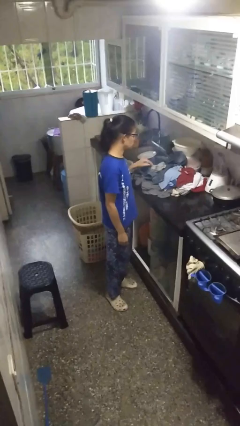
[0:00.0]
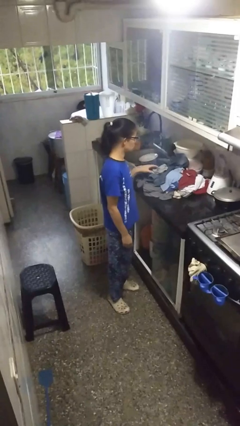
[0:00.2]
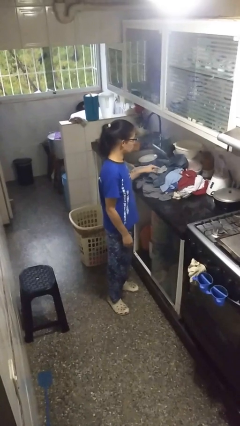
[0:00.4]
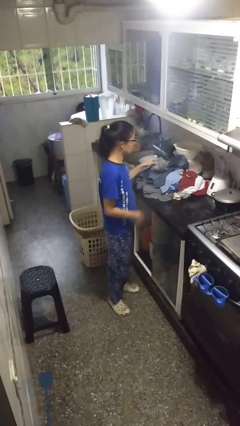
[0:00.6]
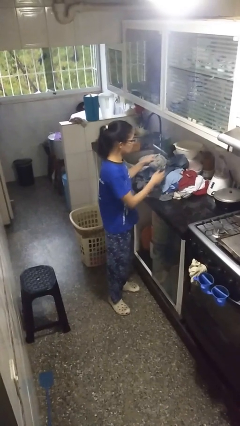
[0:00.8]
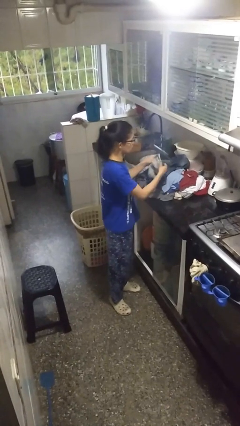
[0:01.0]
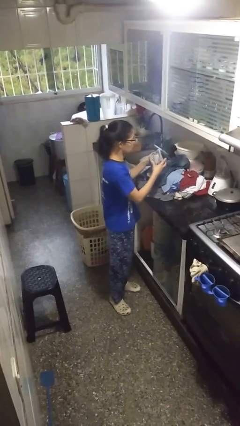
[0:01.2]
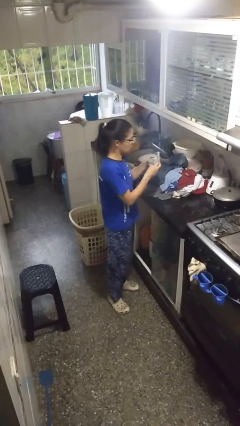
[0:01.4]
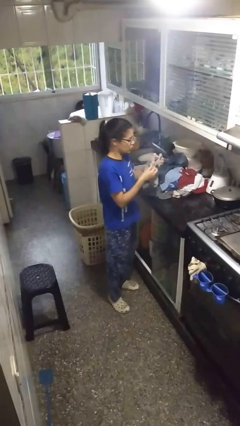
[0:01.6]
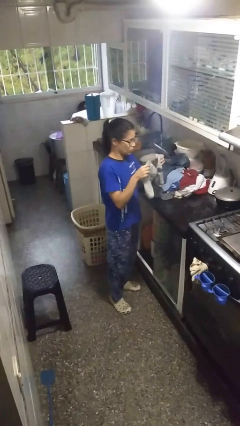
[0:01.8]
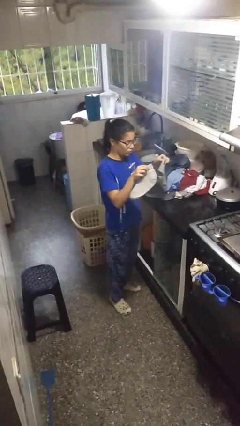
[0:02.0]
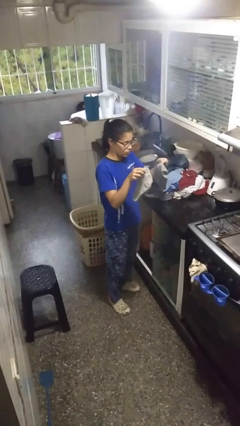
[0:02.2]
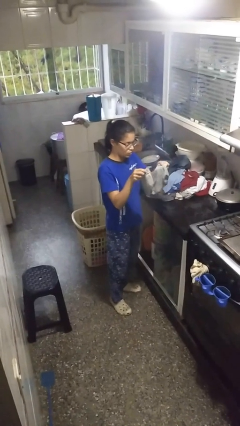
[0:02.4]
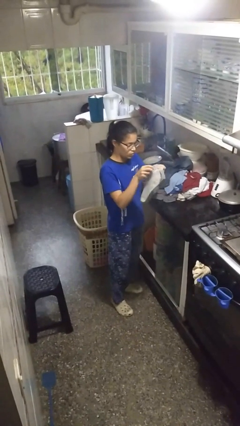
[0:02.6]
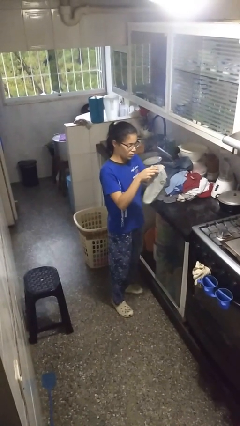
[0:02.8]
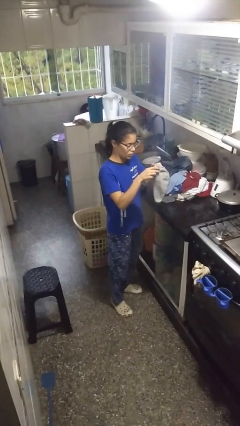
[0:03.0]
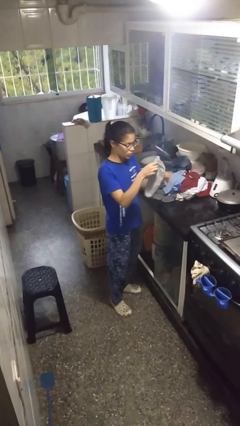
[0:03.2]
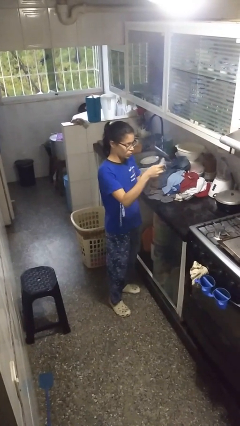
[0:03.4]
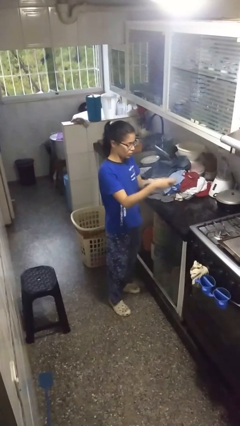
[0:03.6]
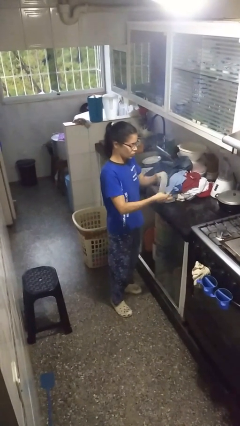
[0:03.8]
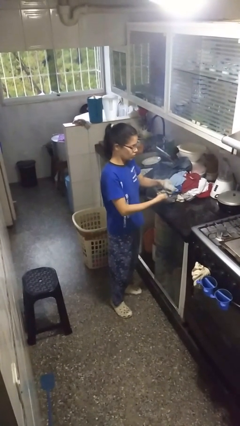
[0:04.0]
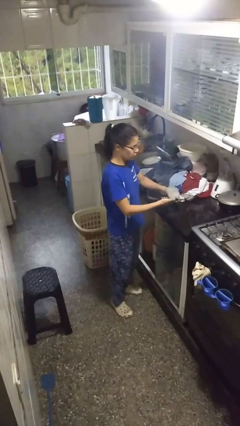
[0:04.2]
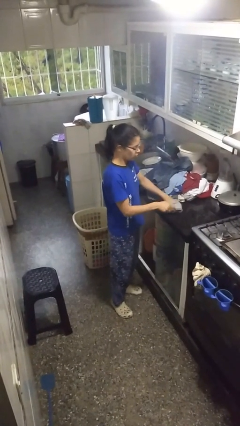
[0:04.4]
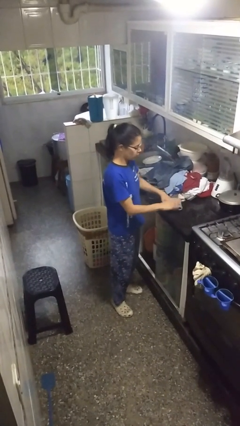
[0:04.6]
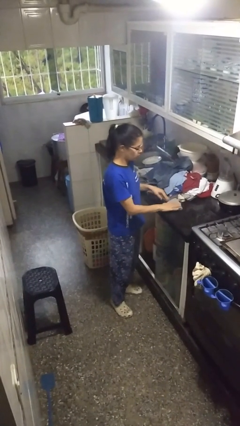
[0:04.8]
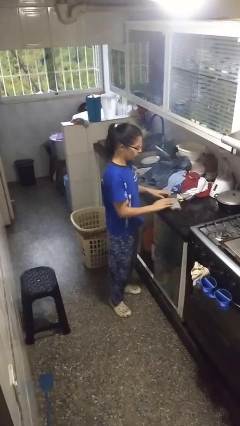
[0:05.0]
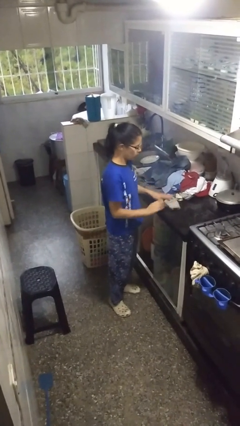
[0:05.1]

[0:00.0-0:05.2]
person folds socks

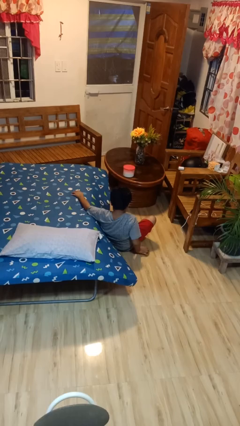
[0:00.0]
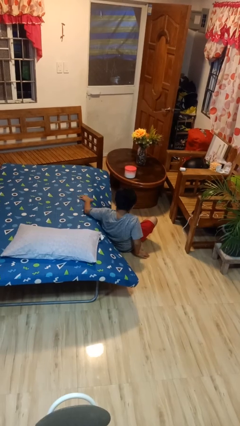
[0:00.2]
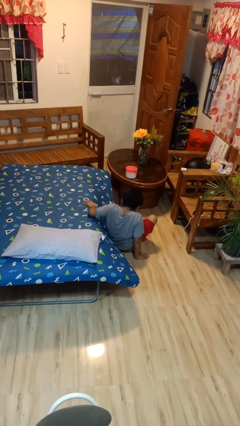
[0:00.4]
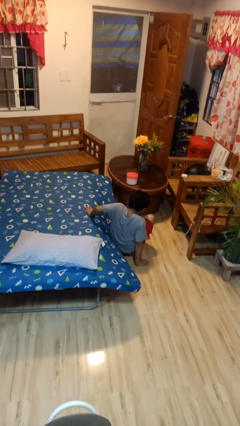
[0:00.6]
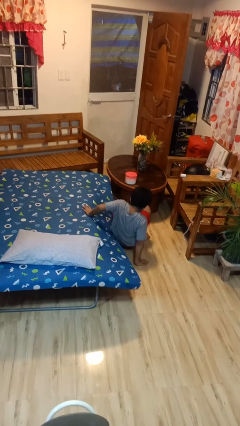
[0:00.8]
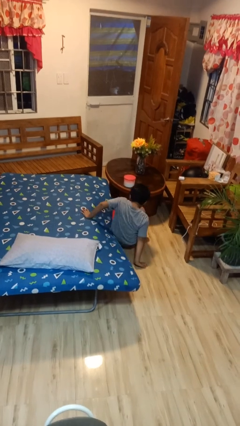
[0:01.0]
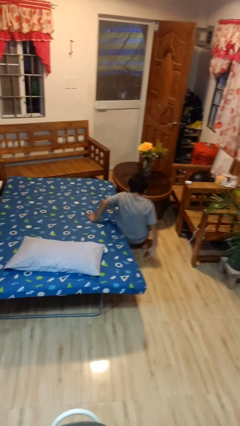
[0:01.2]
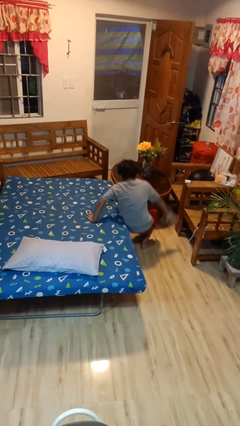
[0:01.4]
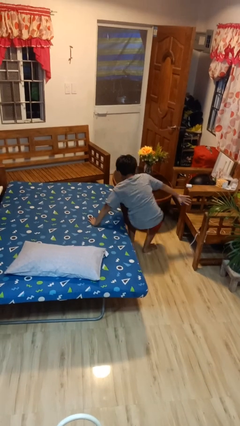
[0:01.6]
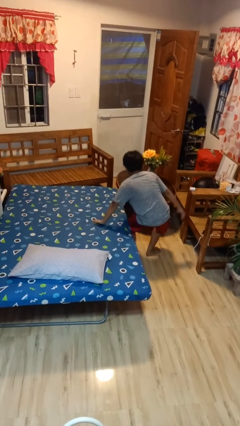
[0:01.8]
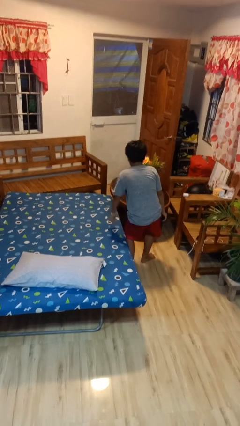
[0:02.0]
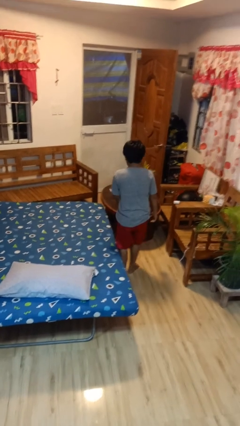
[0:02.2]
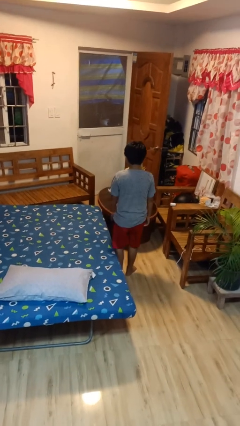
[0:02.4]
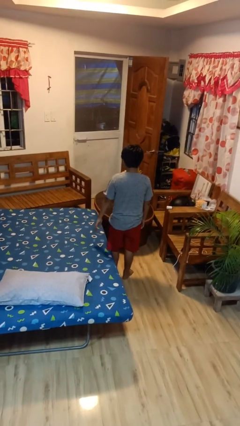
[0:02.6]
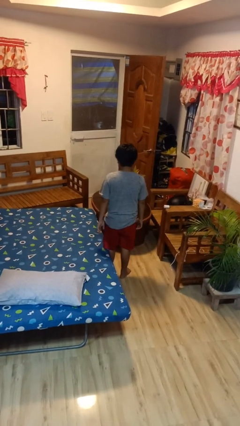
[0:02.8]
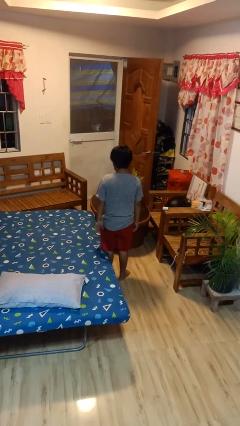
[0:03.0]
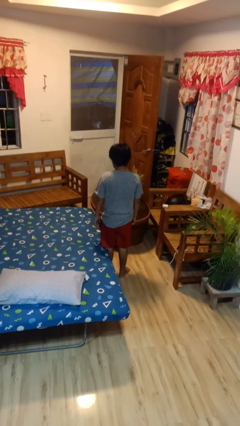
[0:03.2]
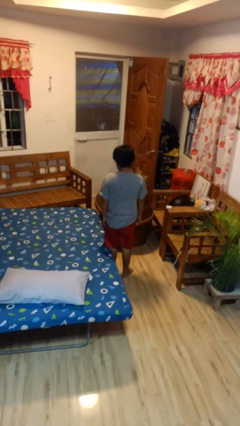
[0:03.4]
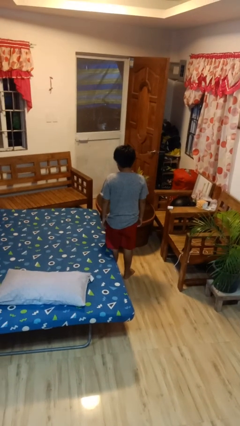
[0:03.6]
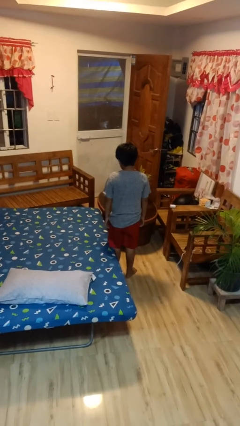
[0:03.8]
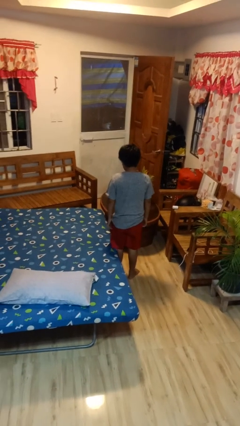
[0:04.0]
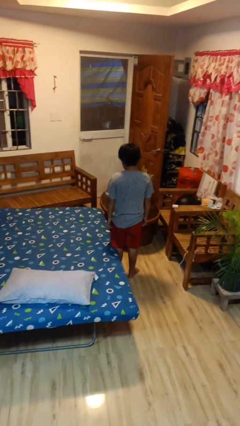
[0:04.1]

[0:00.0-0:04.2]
person stands up from floor

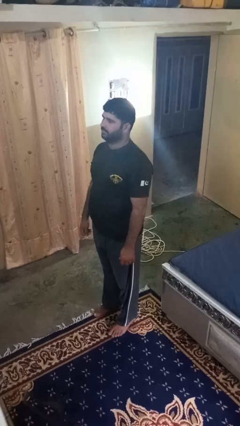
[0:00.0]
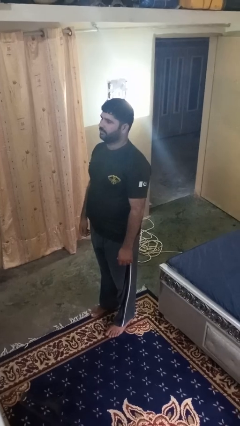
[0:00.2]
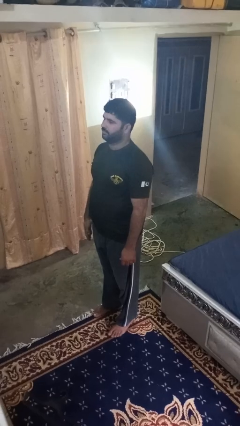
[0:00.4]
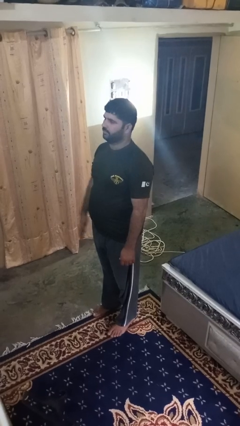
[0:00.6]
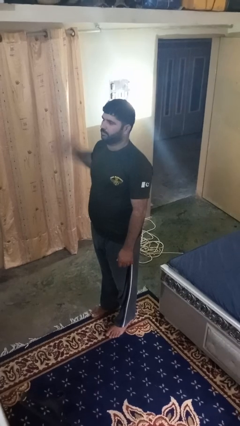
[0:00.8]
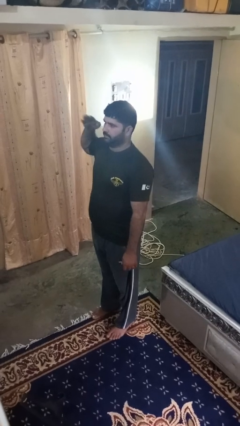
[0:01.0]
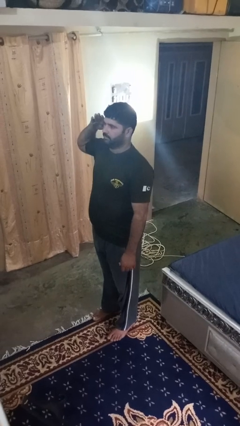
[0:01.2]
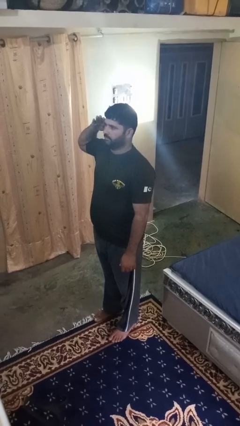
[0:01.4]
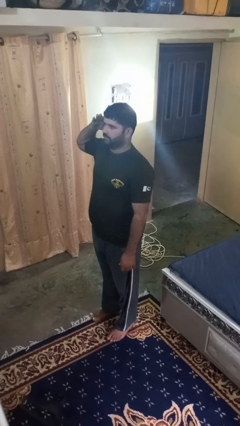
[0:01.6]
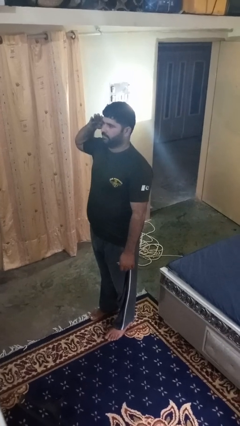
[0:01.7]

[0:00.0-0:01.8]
person salutes

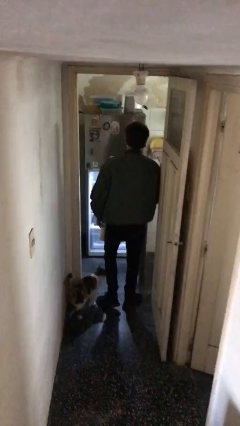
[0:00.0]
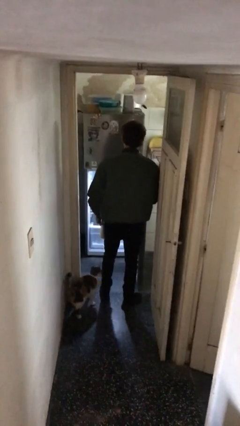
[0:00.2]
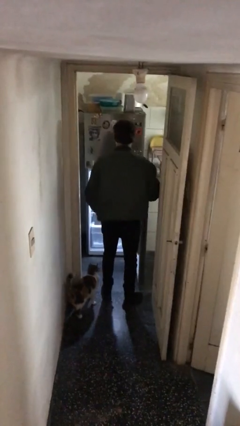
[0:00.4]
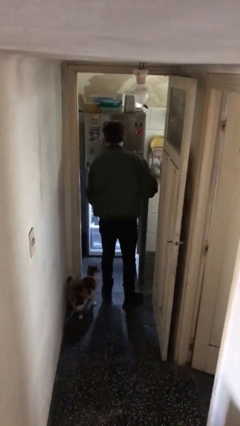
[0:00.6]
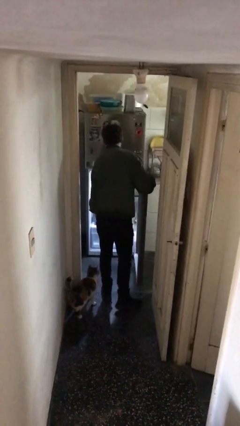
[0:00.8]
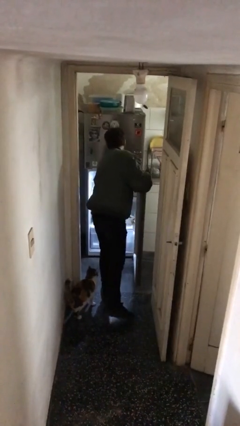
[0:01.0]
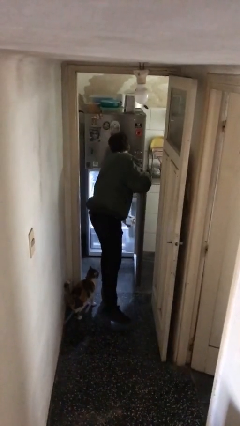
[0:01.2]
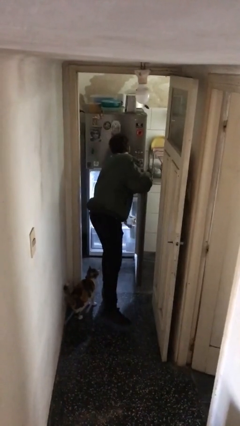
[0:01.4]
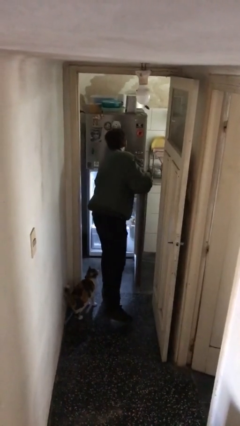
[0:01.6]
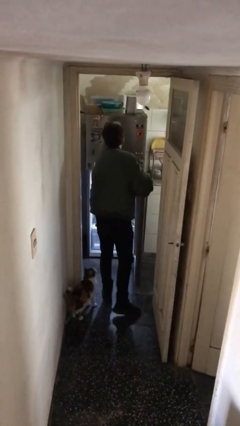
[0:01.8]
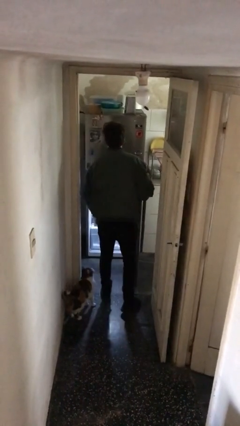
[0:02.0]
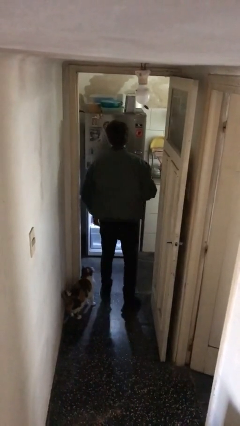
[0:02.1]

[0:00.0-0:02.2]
person puts object into refrigerator

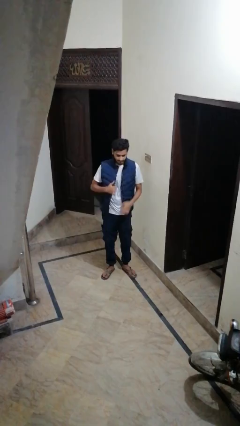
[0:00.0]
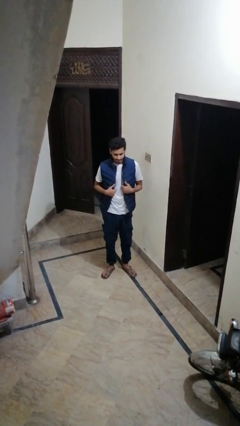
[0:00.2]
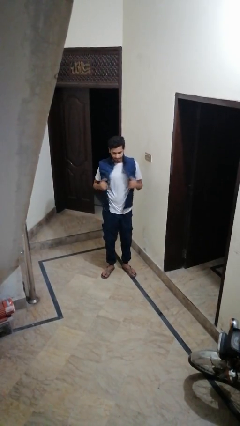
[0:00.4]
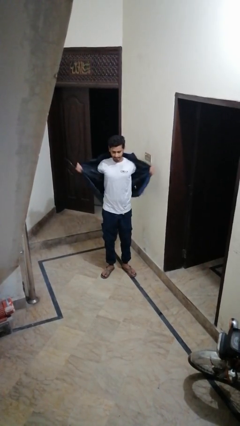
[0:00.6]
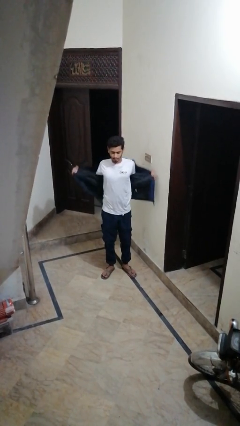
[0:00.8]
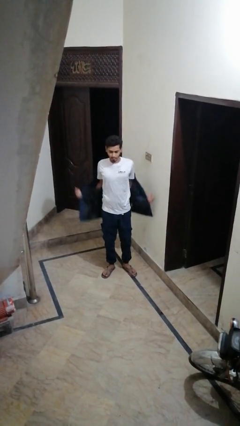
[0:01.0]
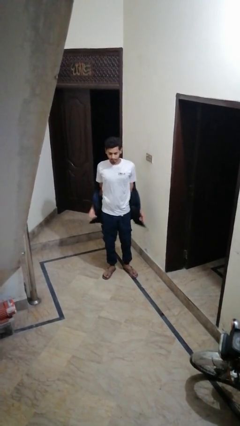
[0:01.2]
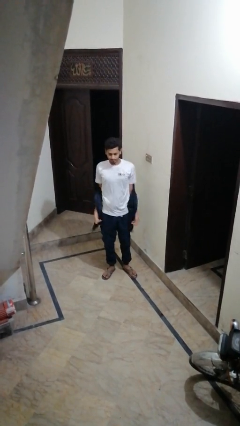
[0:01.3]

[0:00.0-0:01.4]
person takes off jacket

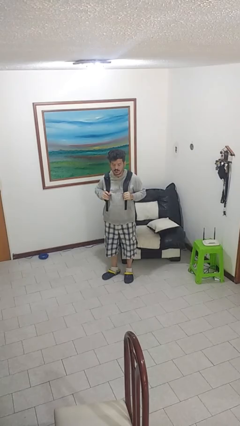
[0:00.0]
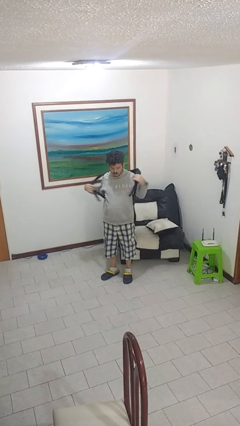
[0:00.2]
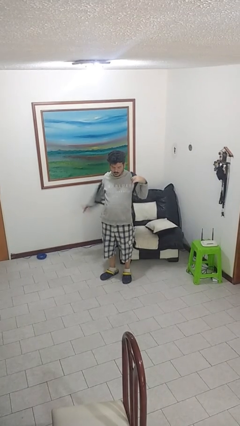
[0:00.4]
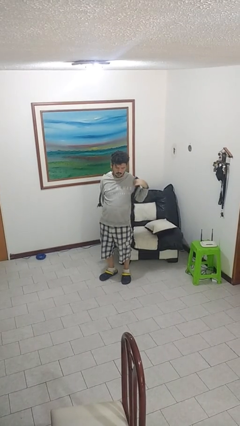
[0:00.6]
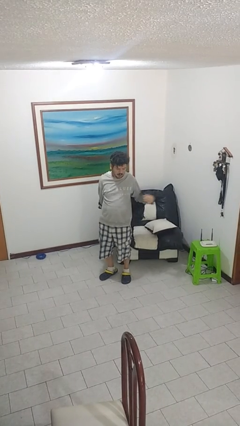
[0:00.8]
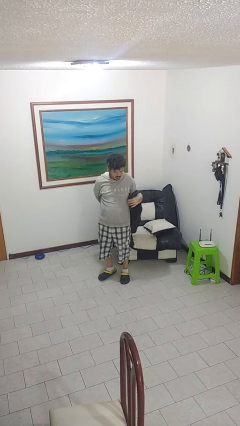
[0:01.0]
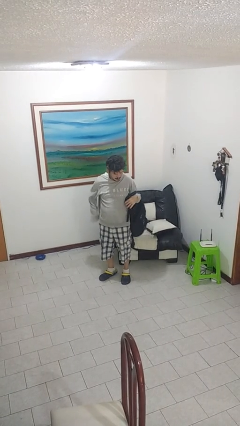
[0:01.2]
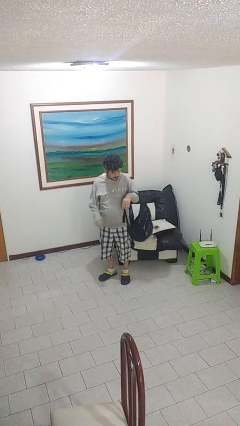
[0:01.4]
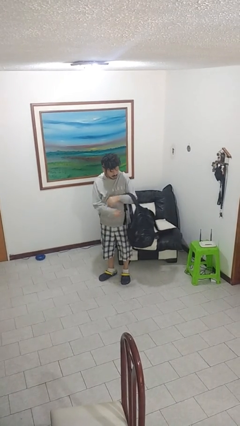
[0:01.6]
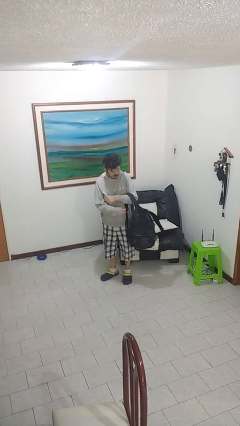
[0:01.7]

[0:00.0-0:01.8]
person takes off backpack

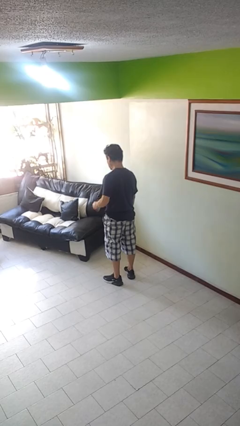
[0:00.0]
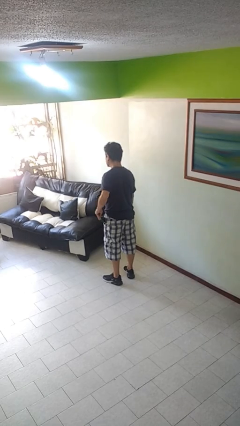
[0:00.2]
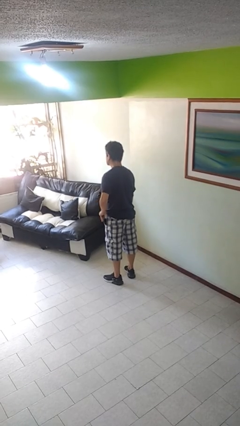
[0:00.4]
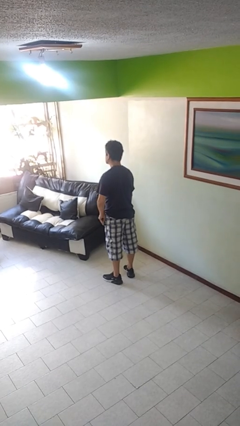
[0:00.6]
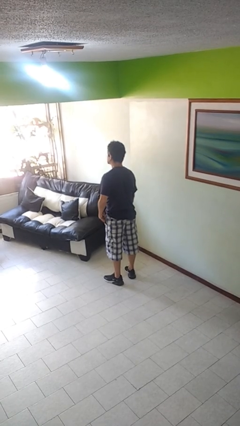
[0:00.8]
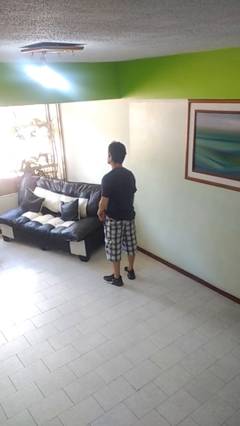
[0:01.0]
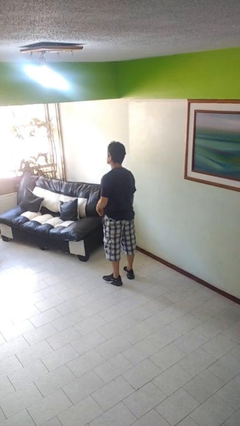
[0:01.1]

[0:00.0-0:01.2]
person puts phone into pocket
